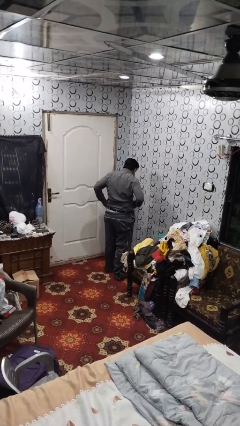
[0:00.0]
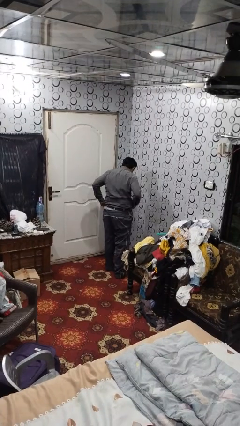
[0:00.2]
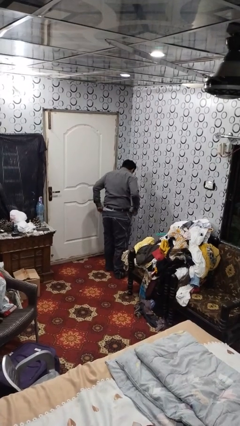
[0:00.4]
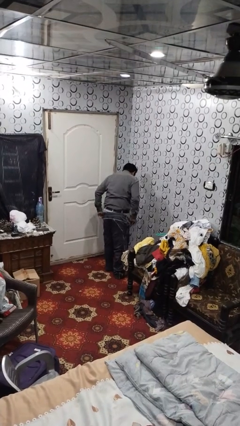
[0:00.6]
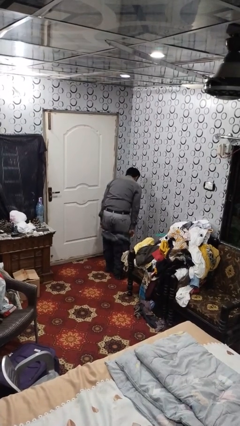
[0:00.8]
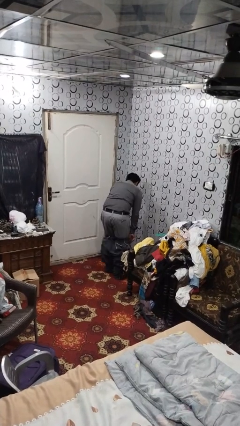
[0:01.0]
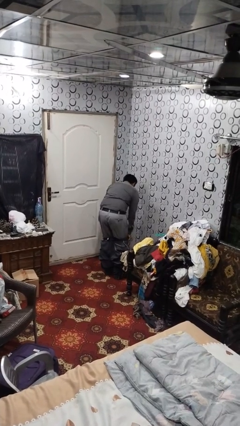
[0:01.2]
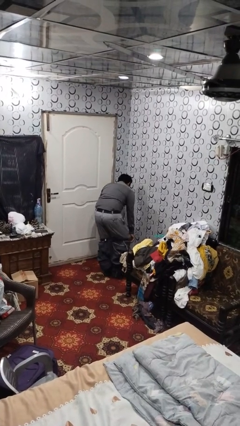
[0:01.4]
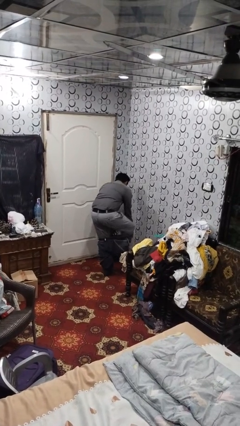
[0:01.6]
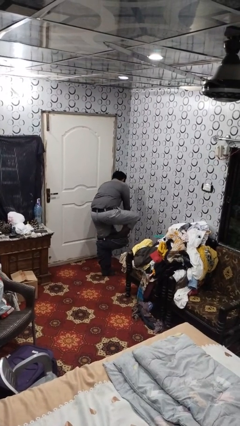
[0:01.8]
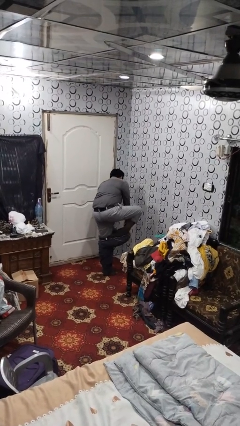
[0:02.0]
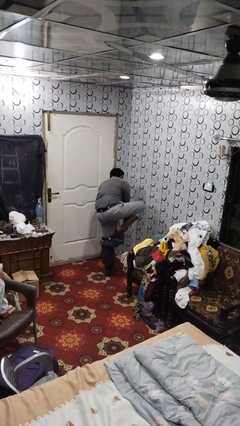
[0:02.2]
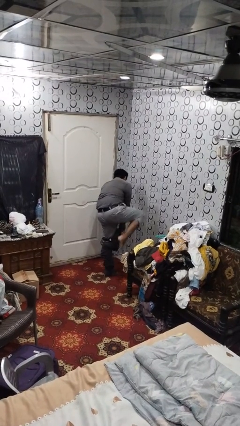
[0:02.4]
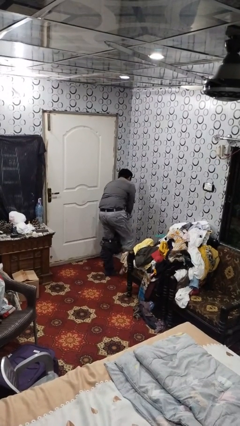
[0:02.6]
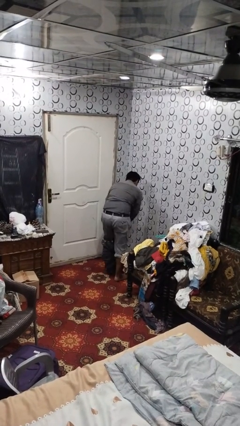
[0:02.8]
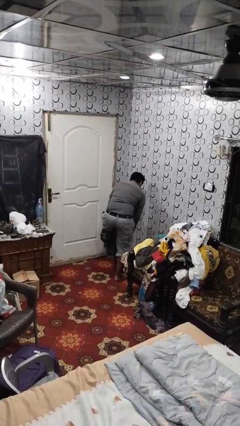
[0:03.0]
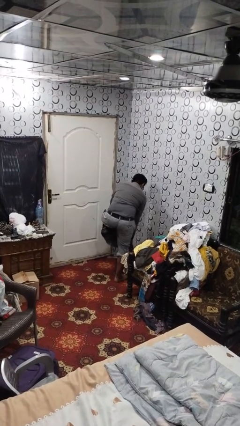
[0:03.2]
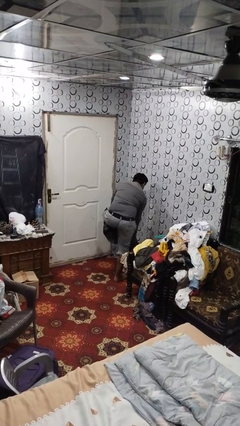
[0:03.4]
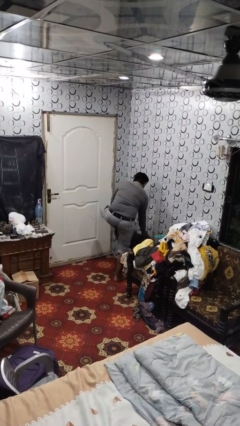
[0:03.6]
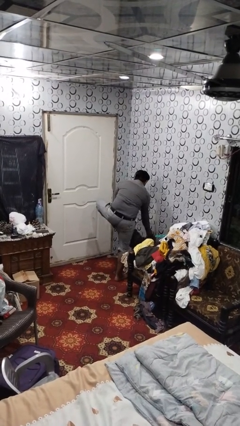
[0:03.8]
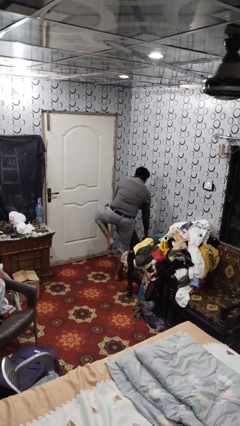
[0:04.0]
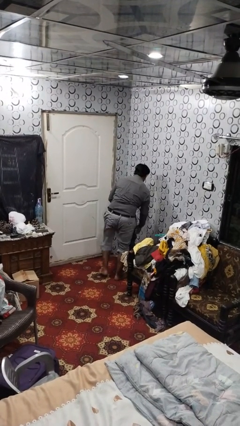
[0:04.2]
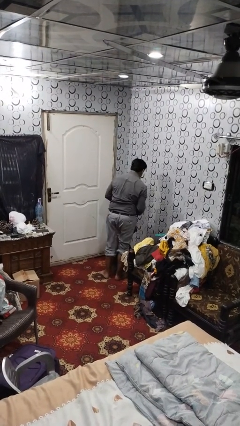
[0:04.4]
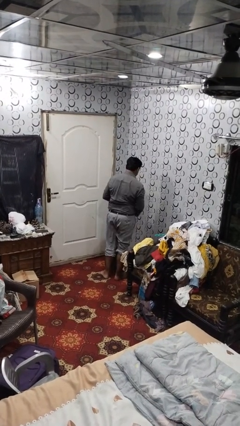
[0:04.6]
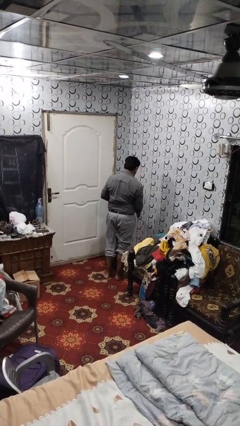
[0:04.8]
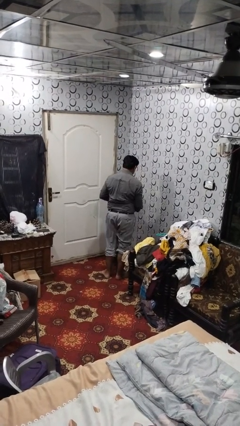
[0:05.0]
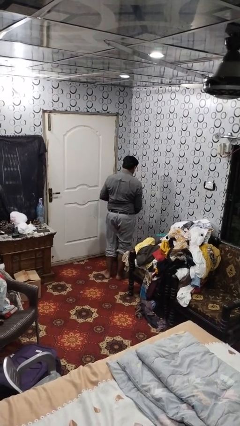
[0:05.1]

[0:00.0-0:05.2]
person takes off pants

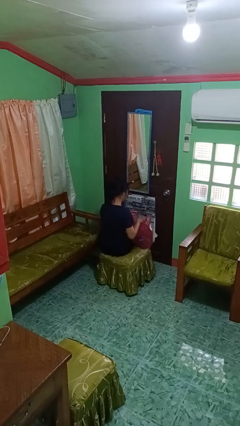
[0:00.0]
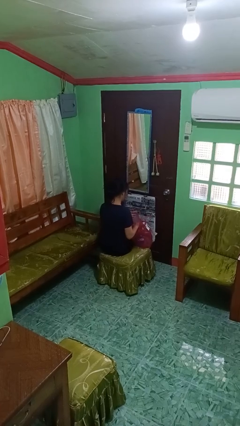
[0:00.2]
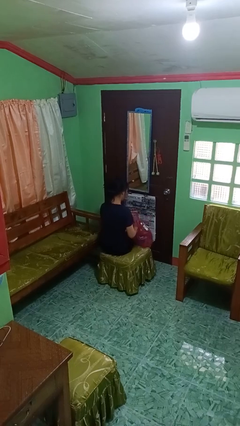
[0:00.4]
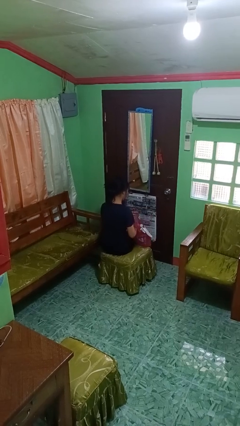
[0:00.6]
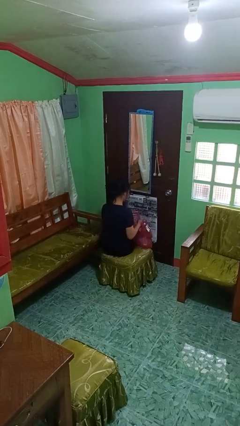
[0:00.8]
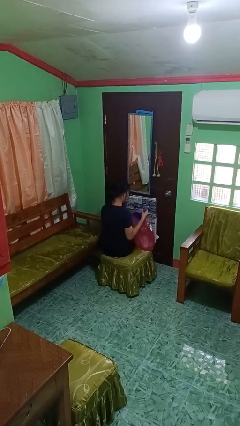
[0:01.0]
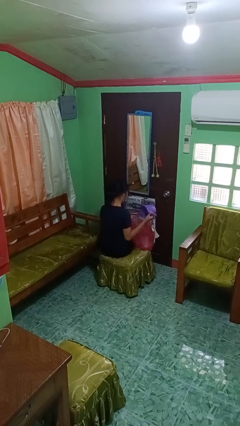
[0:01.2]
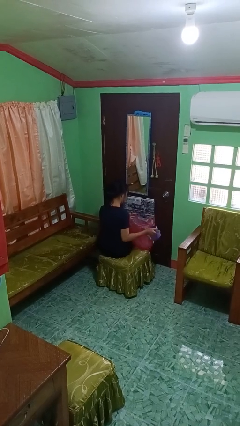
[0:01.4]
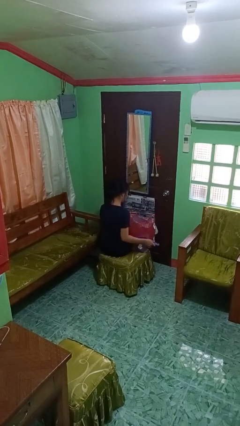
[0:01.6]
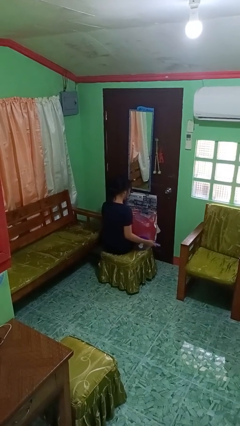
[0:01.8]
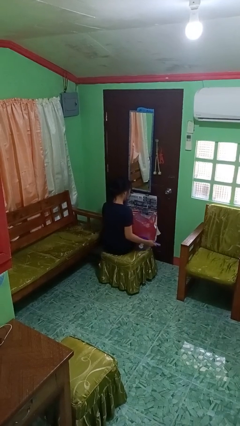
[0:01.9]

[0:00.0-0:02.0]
person takes object from bag

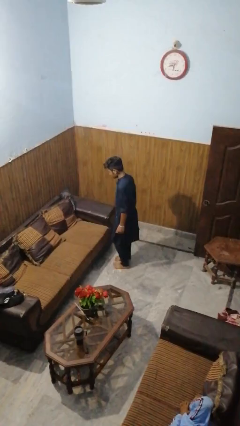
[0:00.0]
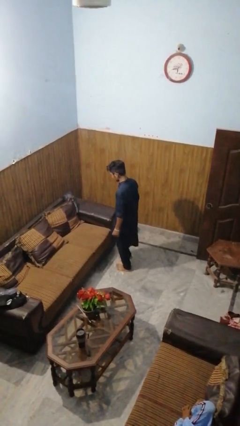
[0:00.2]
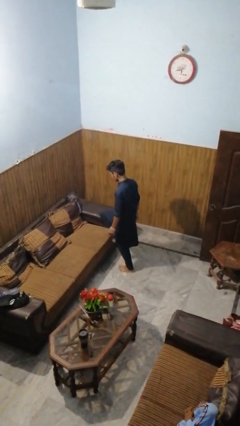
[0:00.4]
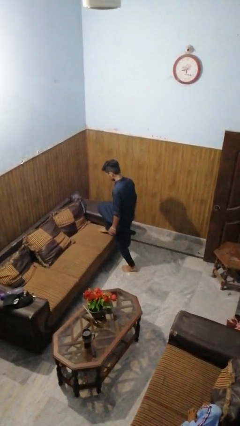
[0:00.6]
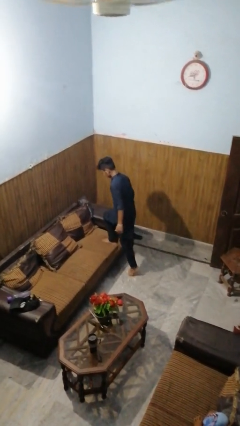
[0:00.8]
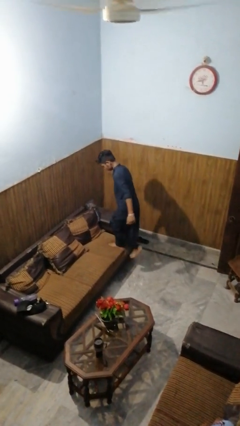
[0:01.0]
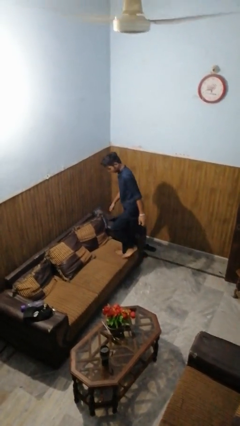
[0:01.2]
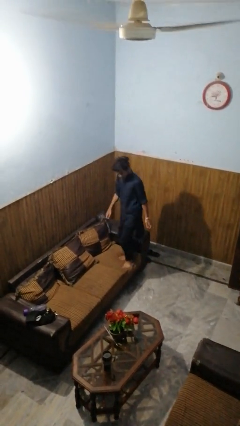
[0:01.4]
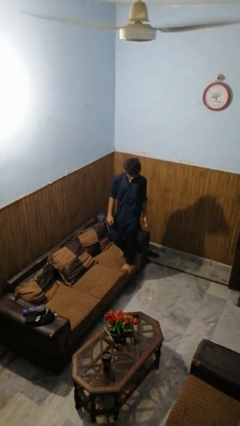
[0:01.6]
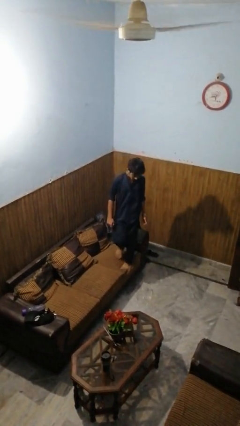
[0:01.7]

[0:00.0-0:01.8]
person climbs on couch

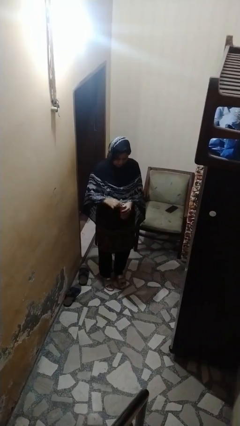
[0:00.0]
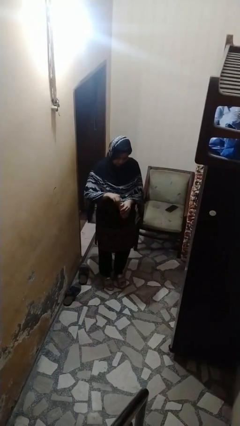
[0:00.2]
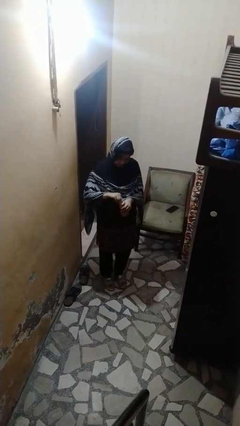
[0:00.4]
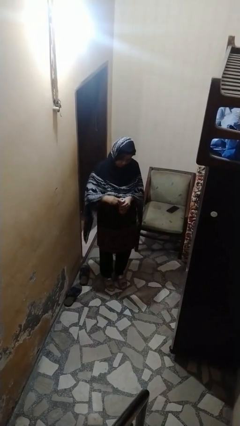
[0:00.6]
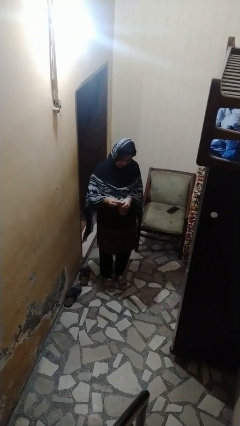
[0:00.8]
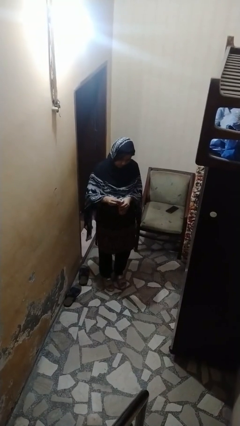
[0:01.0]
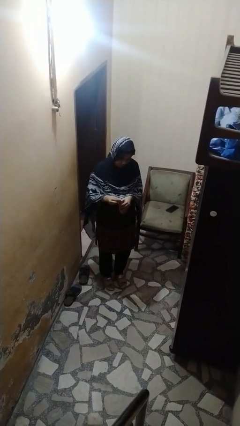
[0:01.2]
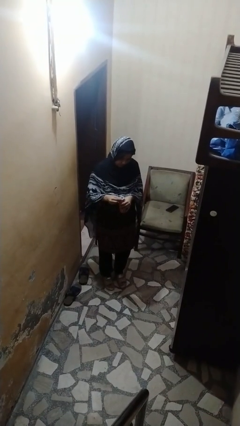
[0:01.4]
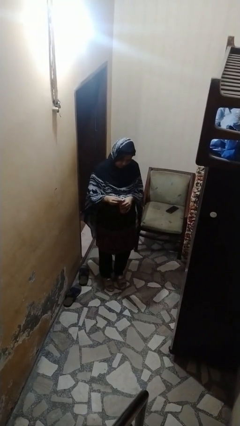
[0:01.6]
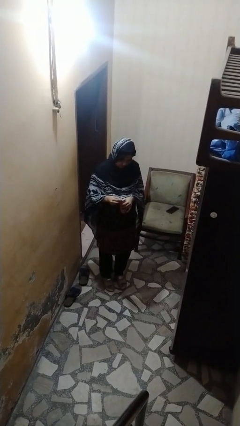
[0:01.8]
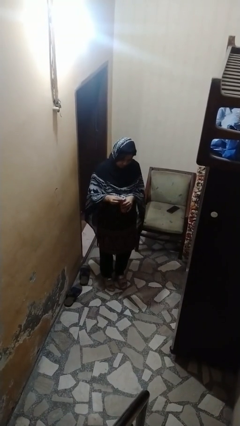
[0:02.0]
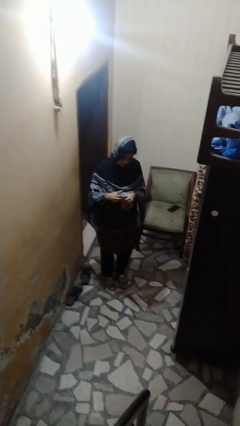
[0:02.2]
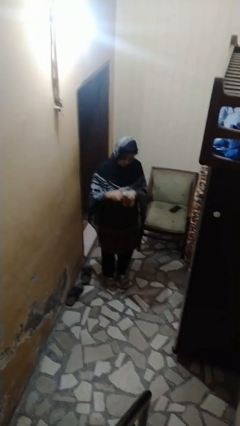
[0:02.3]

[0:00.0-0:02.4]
person opens beverage can

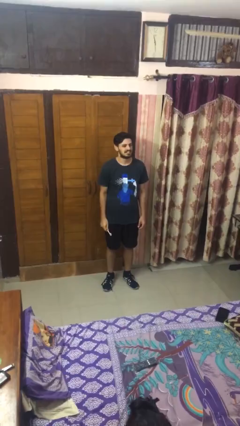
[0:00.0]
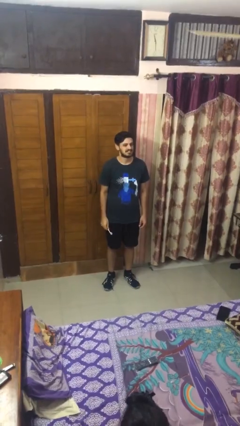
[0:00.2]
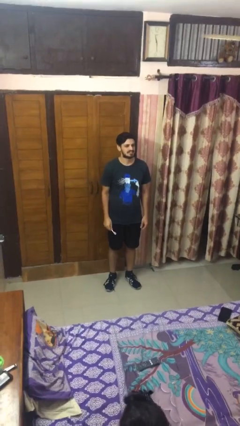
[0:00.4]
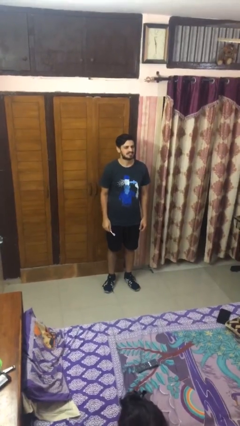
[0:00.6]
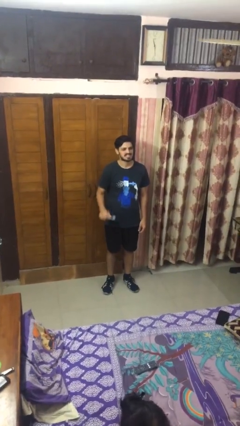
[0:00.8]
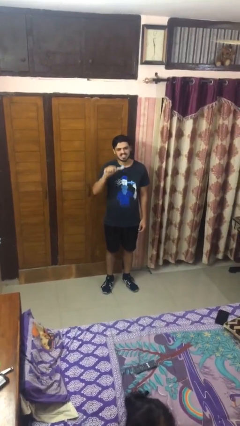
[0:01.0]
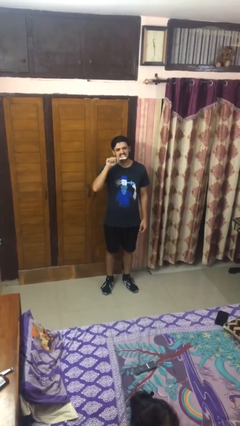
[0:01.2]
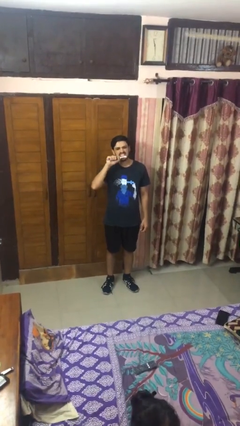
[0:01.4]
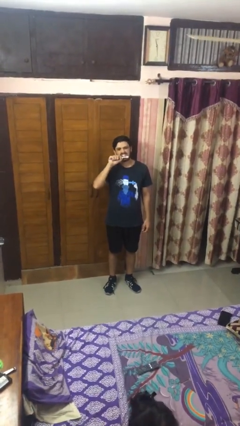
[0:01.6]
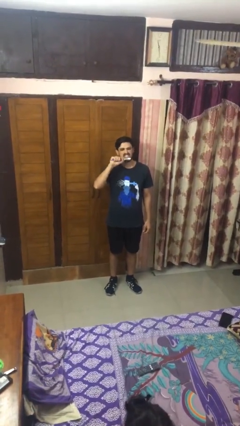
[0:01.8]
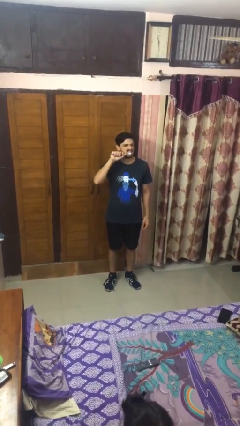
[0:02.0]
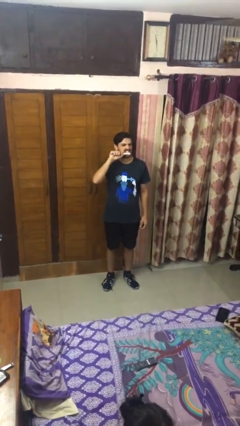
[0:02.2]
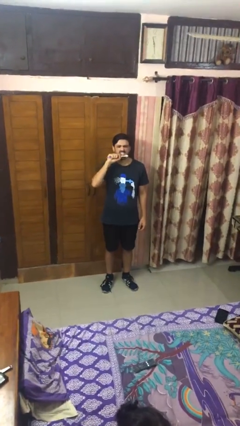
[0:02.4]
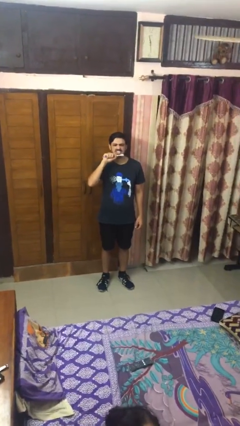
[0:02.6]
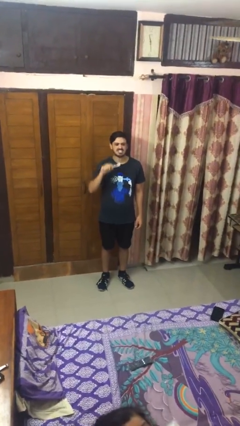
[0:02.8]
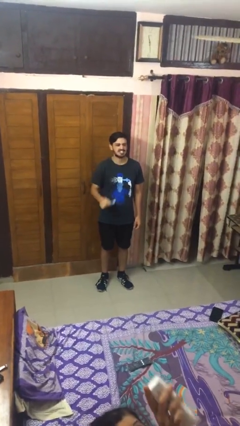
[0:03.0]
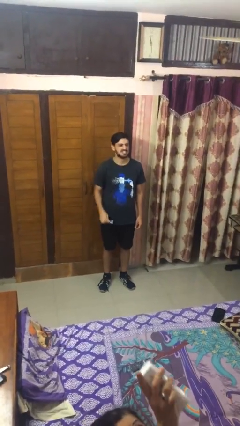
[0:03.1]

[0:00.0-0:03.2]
person brushes teeth

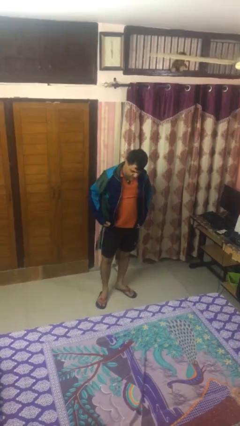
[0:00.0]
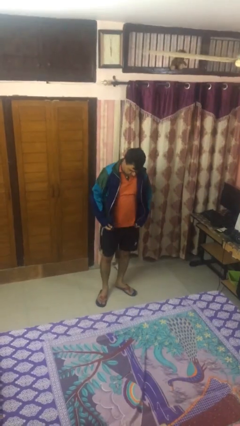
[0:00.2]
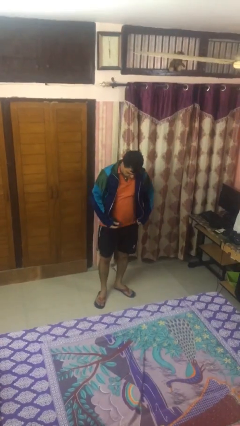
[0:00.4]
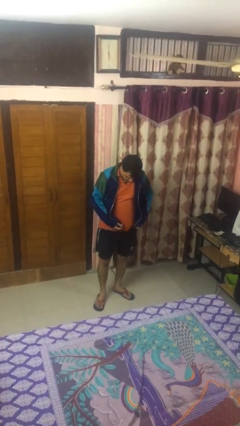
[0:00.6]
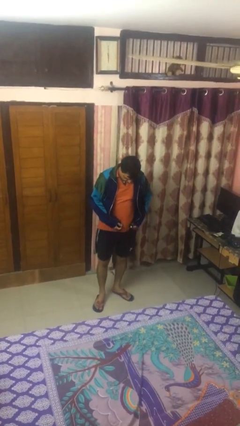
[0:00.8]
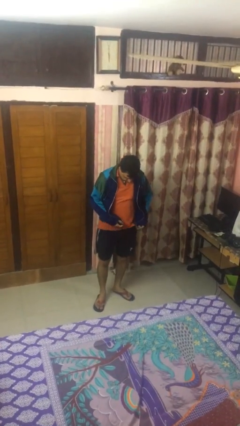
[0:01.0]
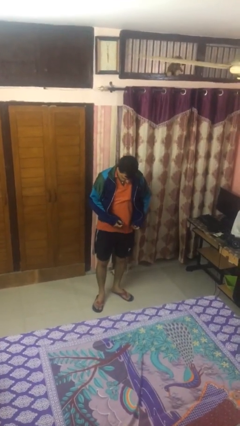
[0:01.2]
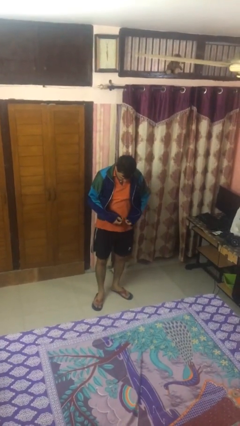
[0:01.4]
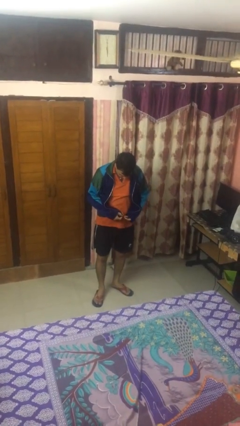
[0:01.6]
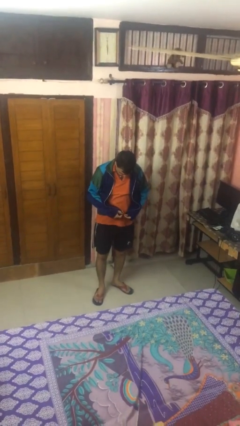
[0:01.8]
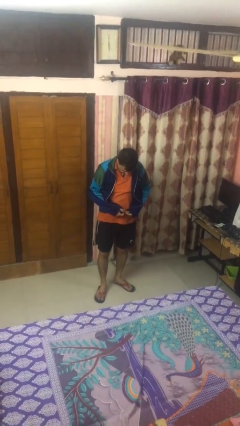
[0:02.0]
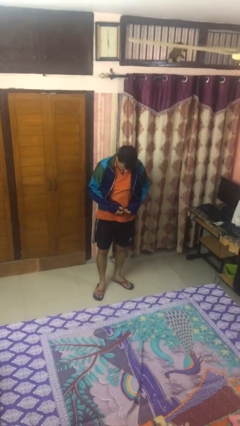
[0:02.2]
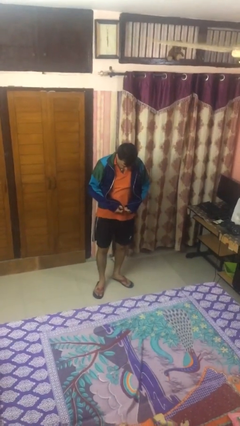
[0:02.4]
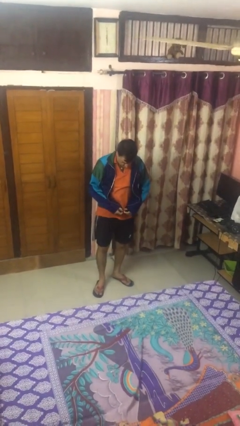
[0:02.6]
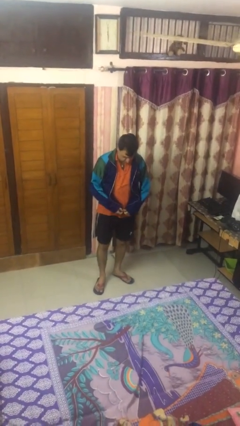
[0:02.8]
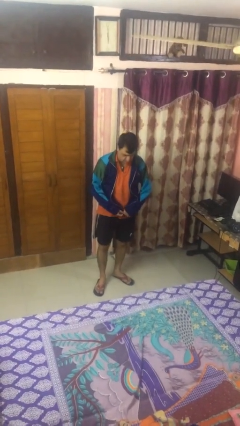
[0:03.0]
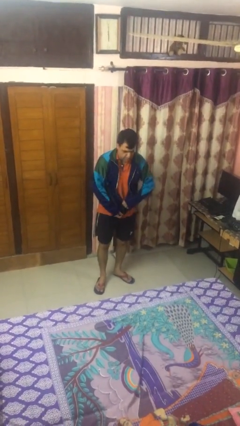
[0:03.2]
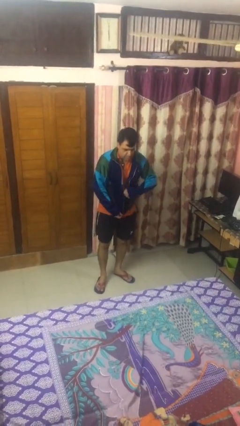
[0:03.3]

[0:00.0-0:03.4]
person zips up jacket
